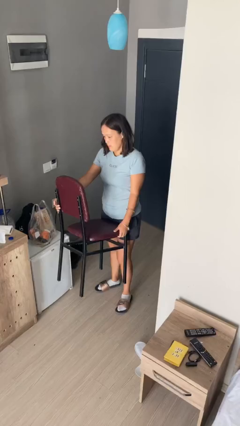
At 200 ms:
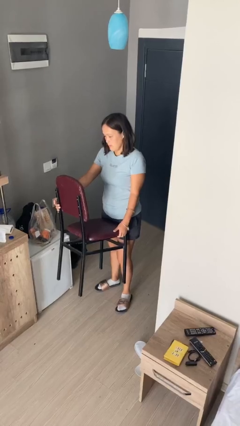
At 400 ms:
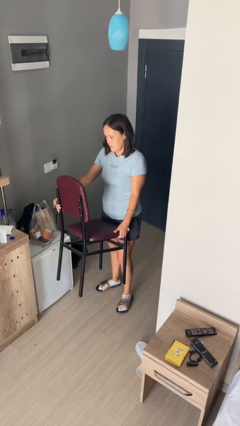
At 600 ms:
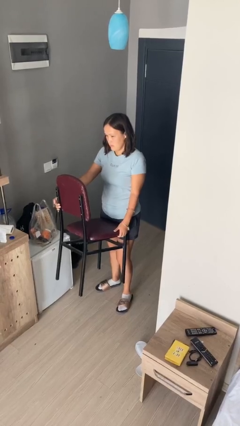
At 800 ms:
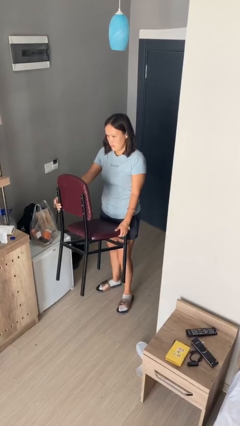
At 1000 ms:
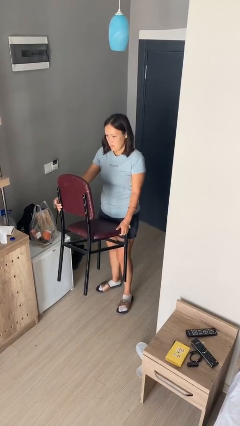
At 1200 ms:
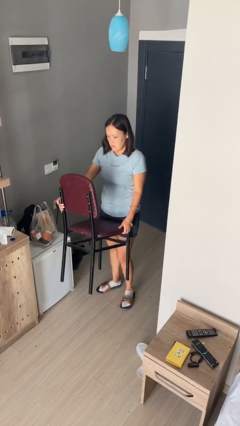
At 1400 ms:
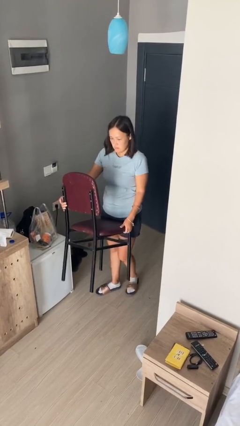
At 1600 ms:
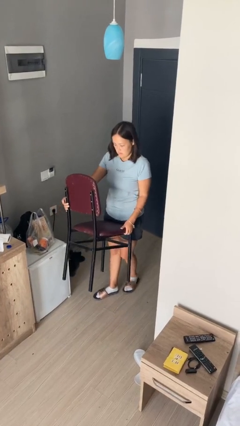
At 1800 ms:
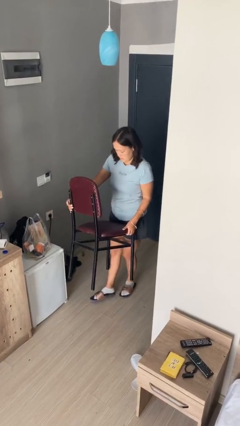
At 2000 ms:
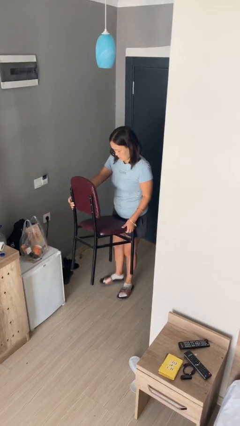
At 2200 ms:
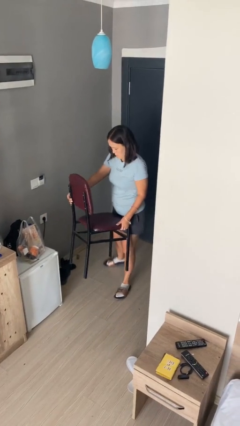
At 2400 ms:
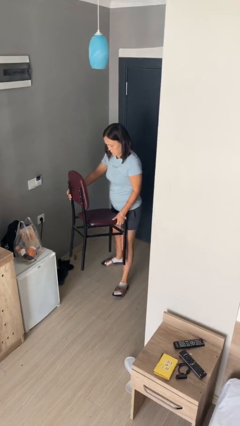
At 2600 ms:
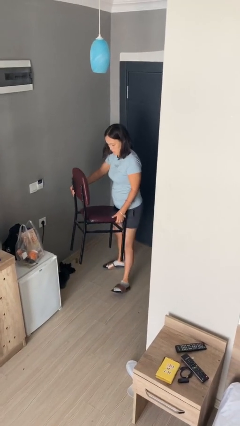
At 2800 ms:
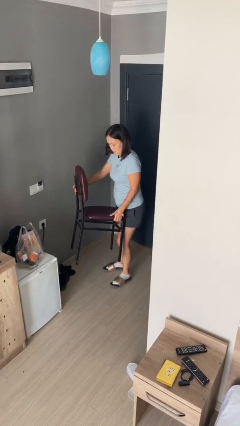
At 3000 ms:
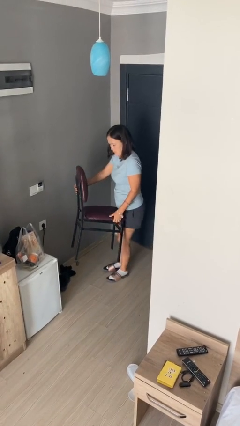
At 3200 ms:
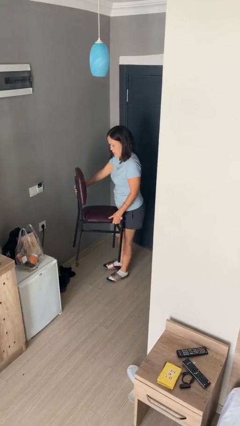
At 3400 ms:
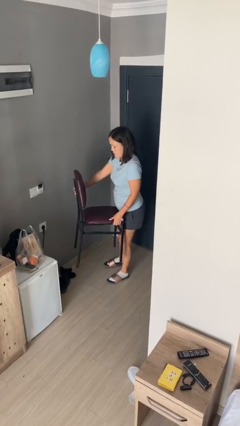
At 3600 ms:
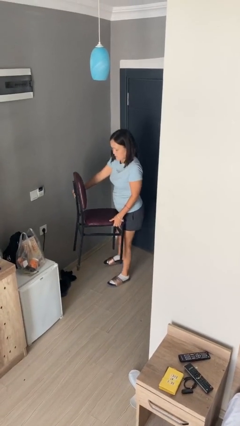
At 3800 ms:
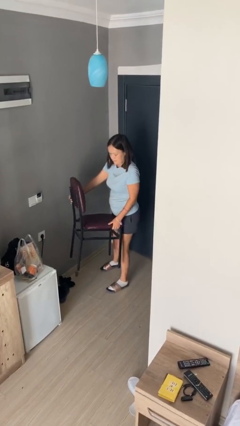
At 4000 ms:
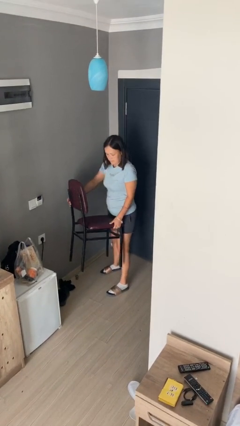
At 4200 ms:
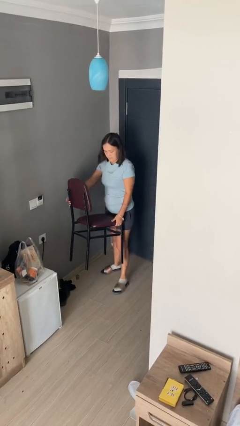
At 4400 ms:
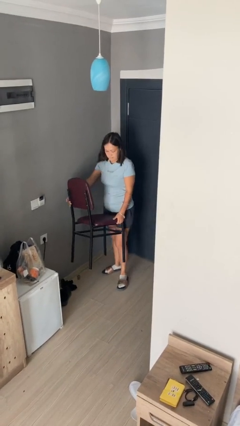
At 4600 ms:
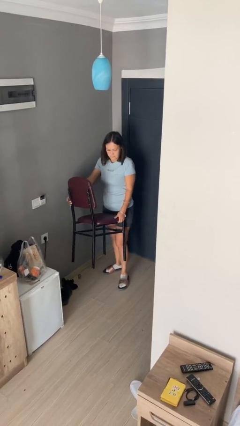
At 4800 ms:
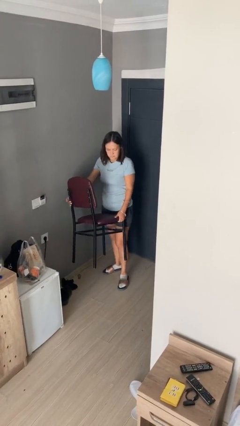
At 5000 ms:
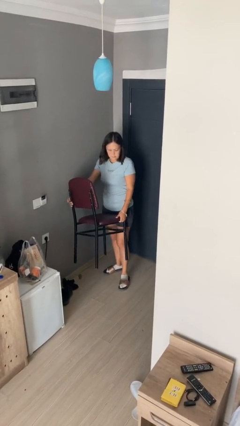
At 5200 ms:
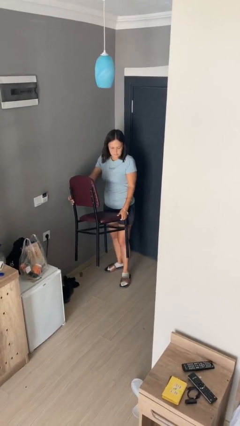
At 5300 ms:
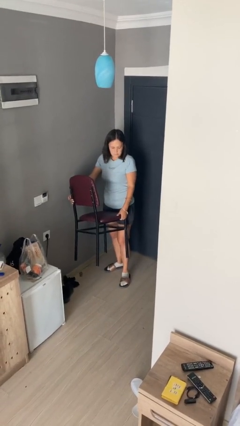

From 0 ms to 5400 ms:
person carries furniture

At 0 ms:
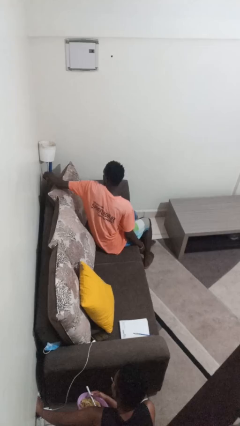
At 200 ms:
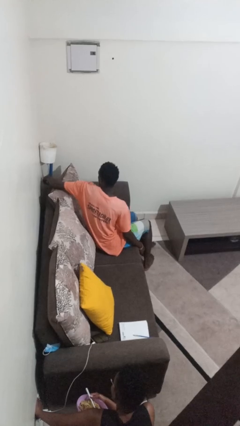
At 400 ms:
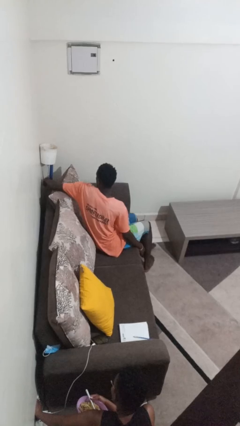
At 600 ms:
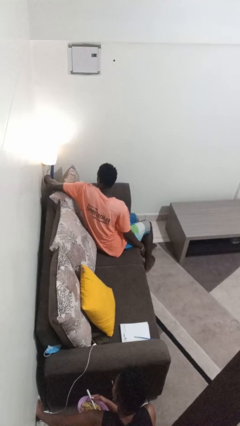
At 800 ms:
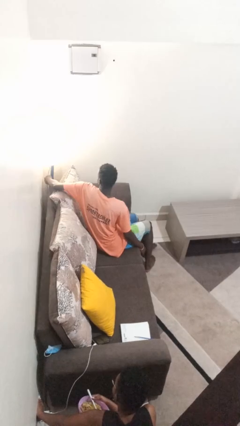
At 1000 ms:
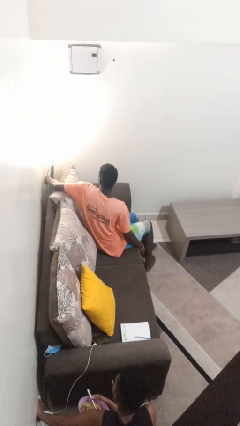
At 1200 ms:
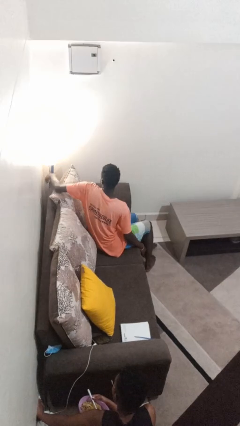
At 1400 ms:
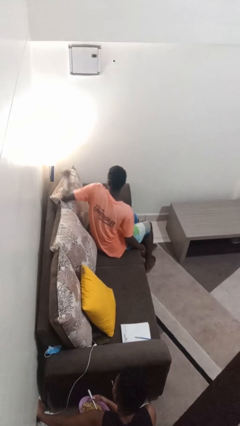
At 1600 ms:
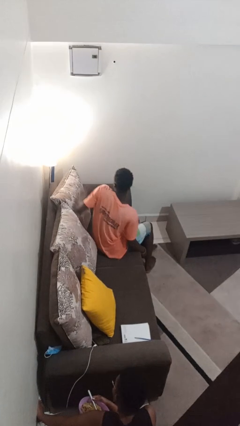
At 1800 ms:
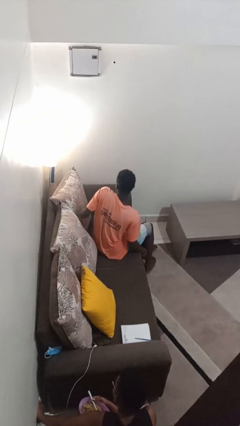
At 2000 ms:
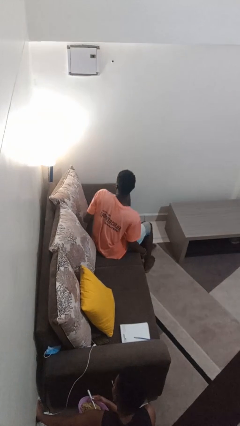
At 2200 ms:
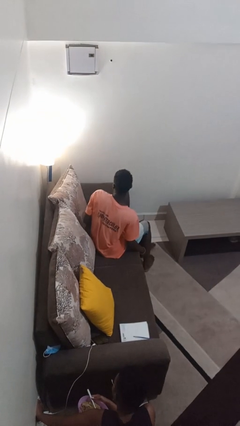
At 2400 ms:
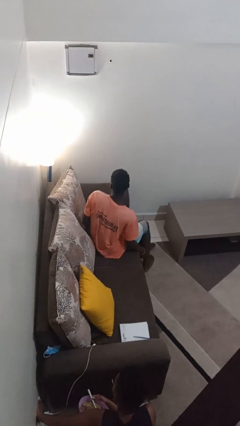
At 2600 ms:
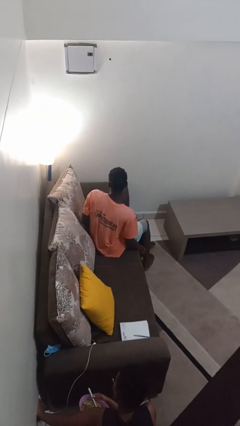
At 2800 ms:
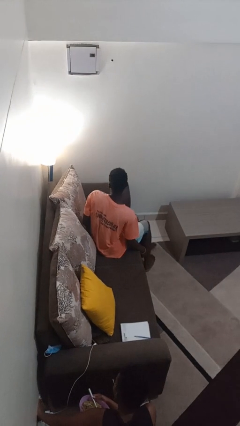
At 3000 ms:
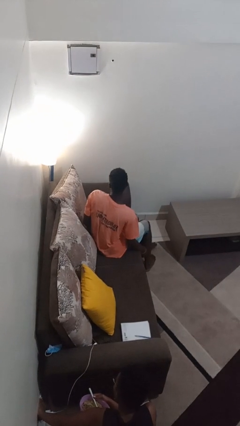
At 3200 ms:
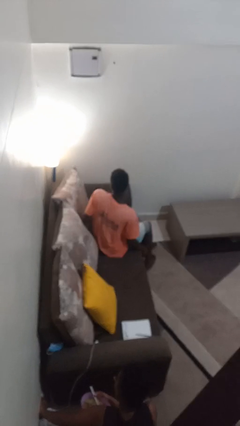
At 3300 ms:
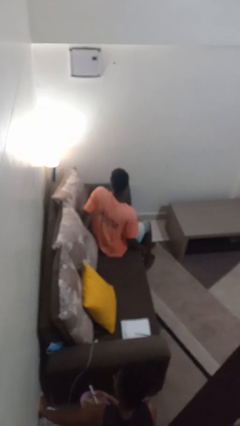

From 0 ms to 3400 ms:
person turns on lamp

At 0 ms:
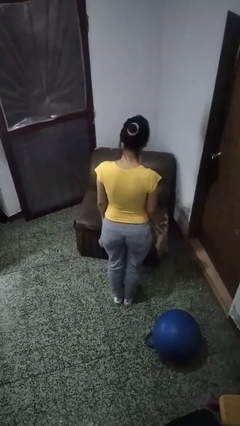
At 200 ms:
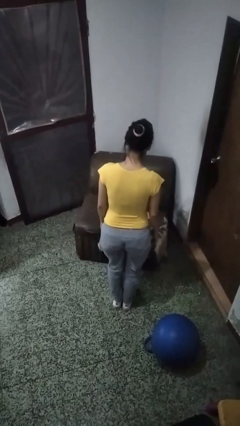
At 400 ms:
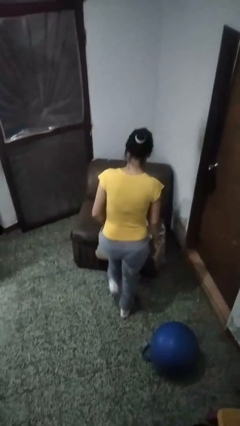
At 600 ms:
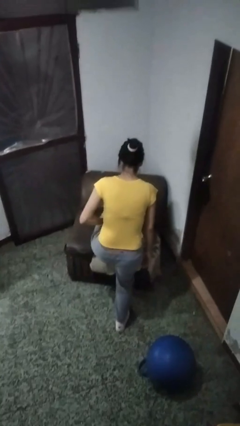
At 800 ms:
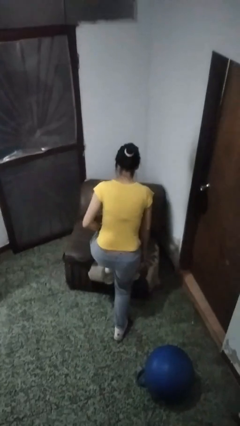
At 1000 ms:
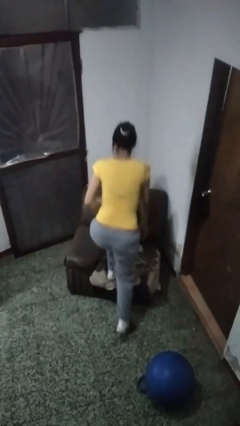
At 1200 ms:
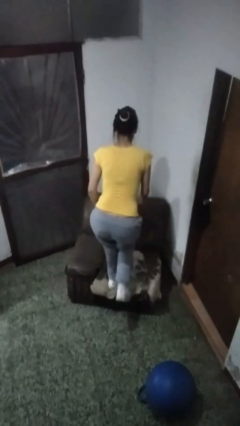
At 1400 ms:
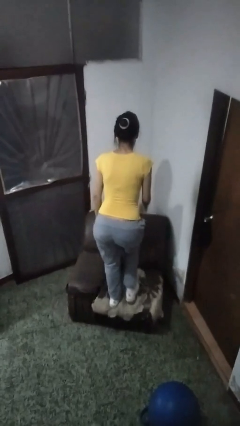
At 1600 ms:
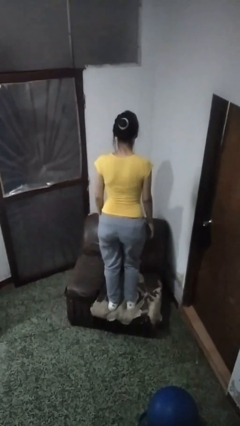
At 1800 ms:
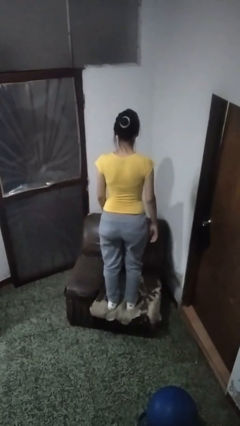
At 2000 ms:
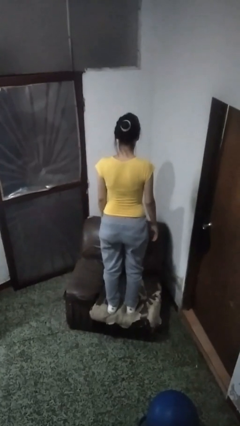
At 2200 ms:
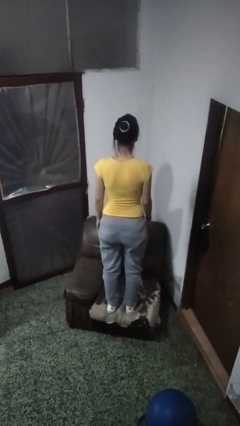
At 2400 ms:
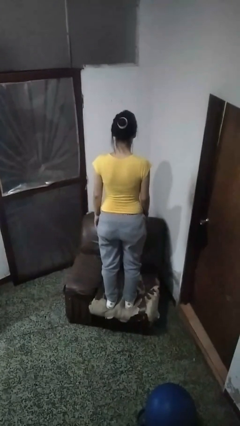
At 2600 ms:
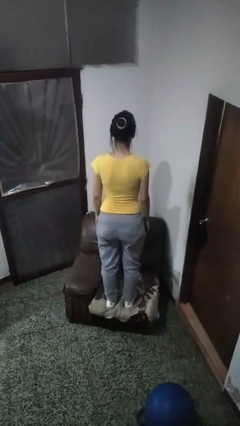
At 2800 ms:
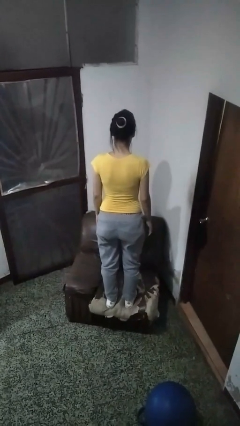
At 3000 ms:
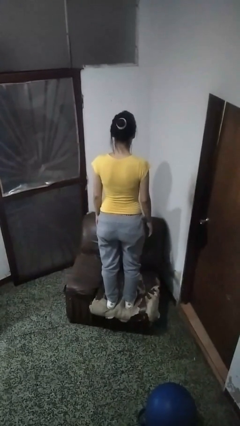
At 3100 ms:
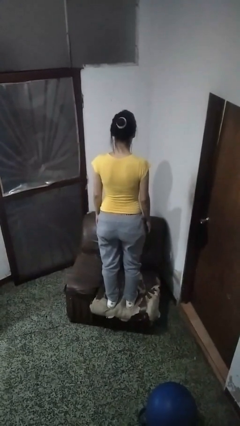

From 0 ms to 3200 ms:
person climbs on couch

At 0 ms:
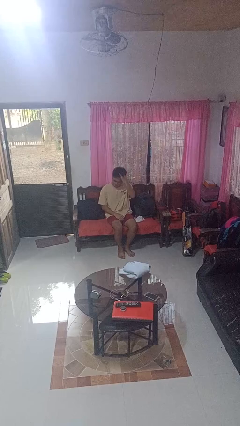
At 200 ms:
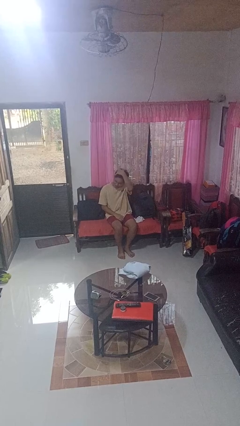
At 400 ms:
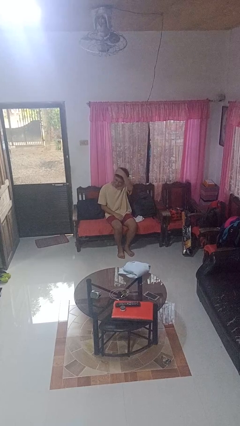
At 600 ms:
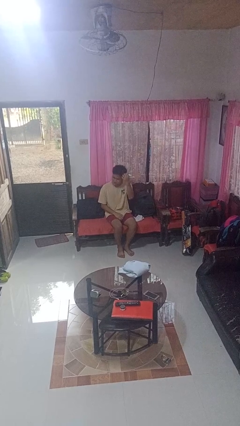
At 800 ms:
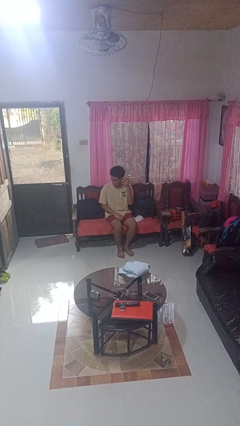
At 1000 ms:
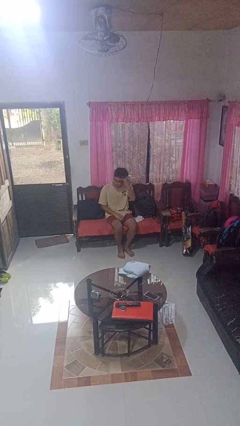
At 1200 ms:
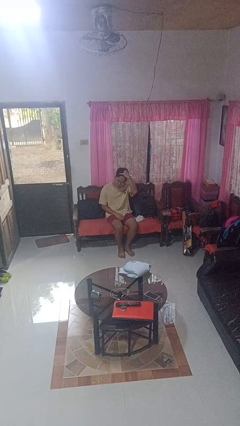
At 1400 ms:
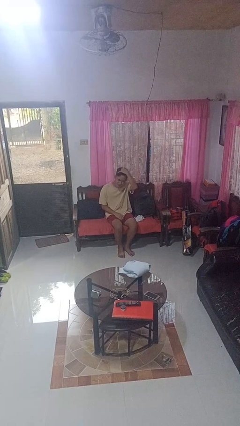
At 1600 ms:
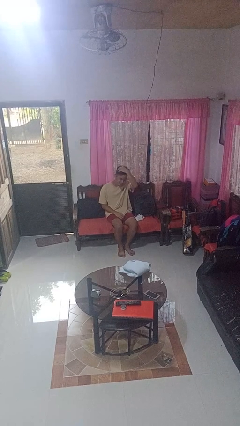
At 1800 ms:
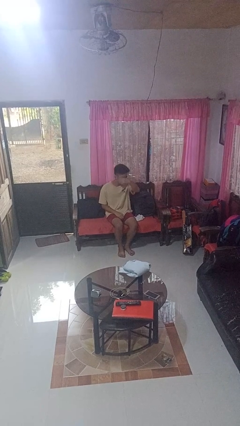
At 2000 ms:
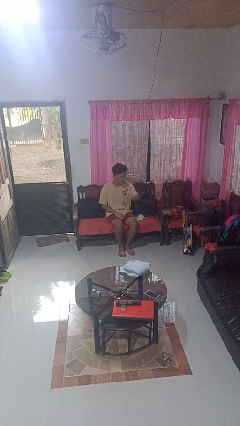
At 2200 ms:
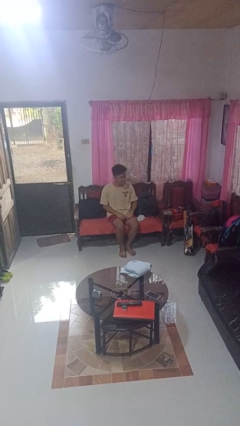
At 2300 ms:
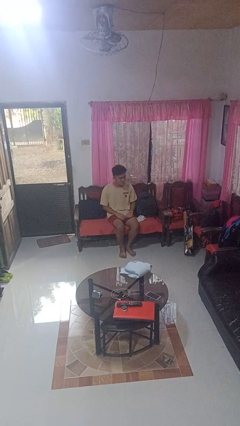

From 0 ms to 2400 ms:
person strokes hair

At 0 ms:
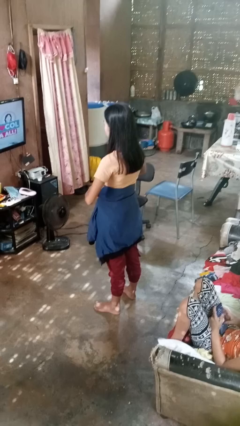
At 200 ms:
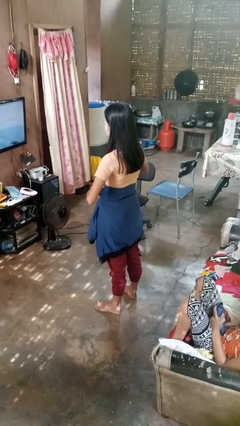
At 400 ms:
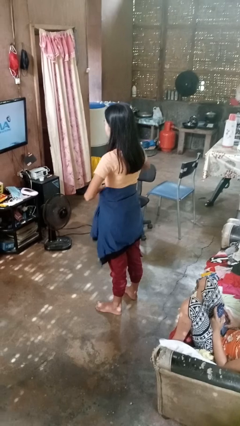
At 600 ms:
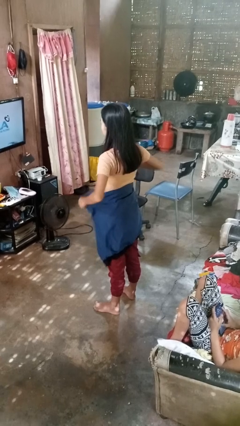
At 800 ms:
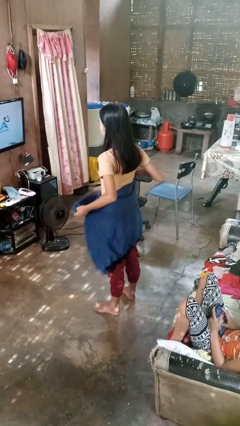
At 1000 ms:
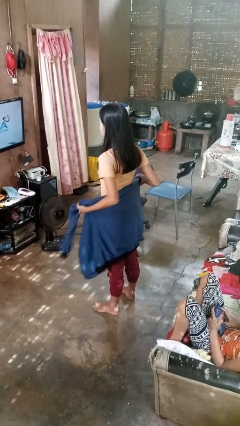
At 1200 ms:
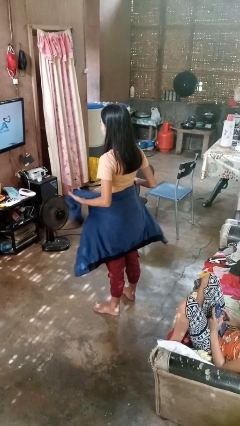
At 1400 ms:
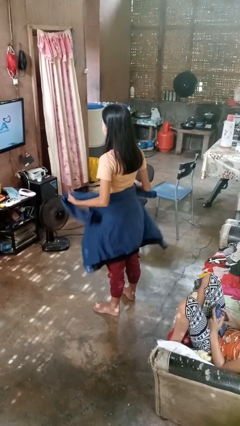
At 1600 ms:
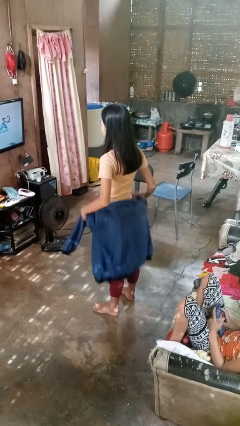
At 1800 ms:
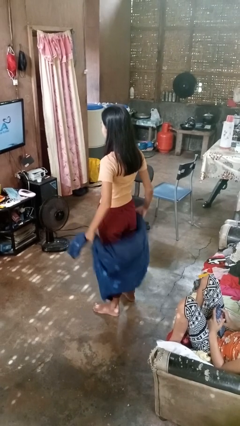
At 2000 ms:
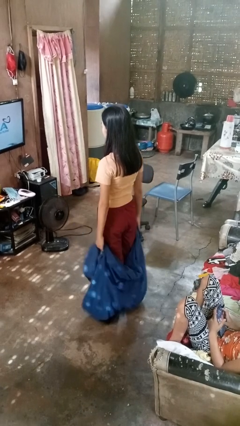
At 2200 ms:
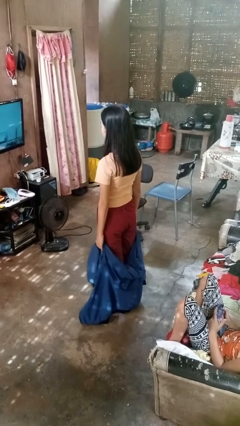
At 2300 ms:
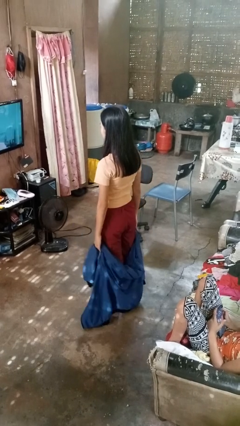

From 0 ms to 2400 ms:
person unties jacket around waist

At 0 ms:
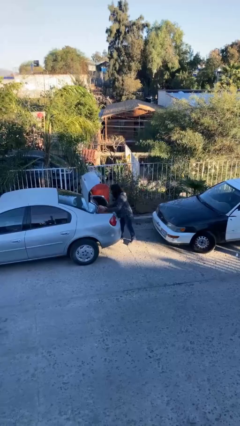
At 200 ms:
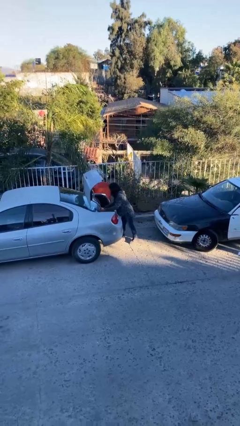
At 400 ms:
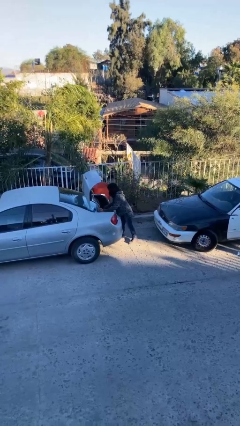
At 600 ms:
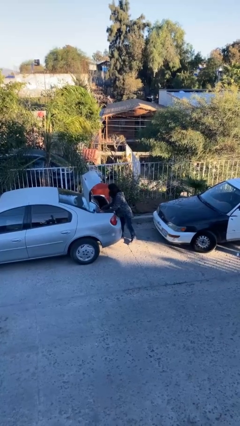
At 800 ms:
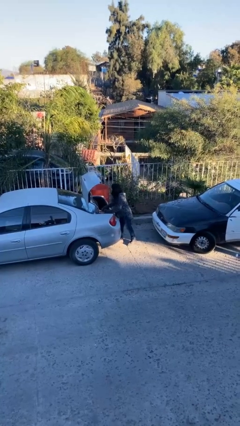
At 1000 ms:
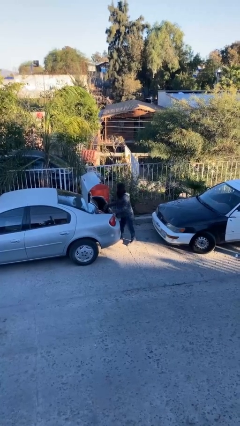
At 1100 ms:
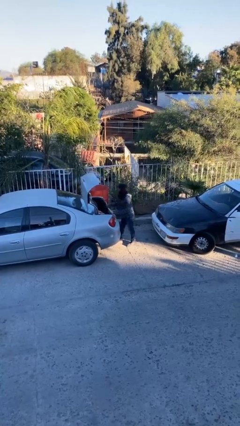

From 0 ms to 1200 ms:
person loads car
